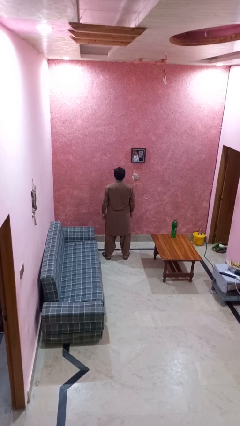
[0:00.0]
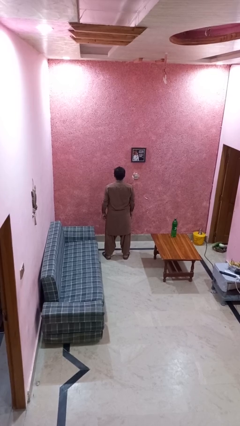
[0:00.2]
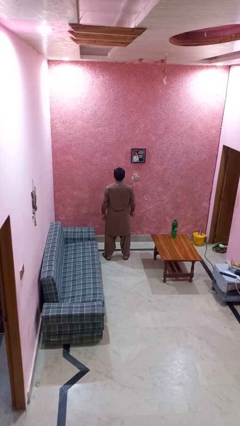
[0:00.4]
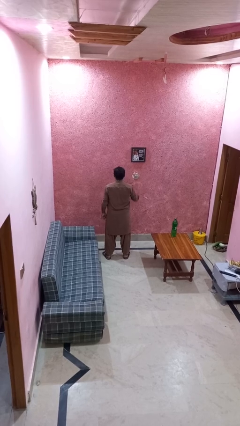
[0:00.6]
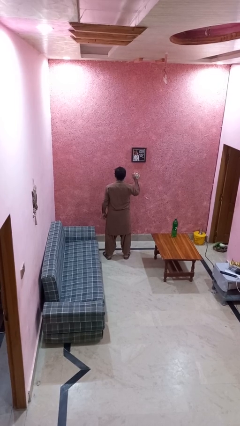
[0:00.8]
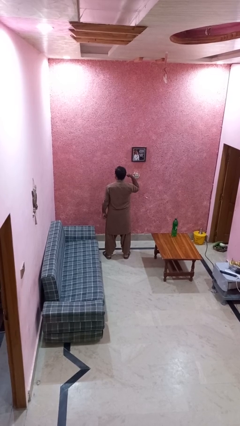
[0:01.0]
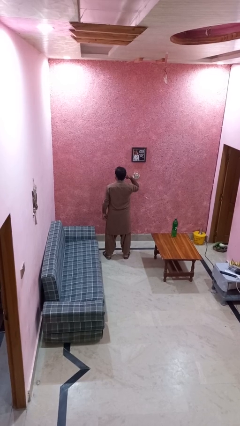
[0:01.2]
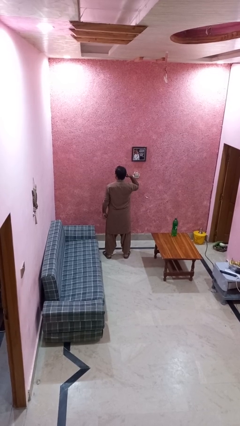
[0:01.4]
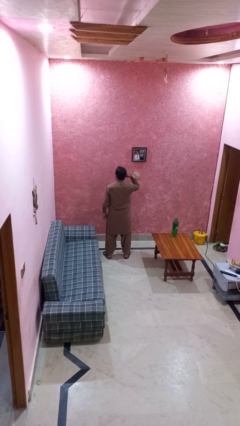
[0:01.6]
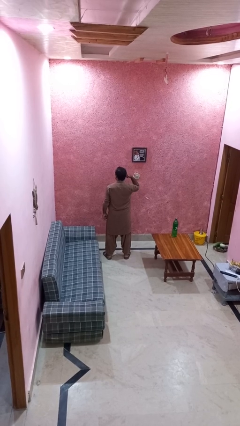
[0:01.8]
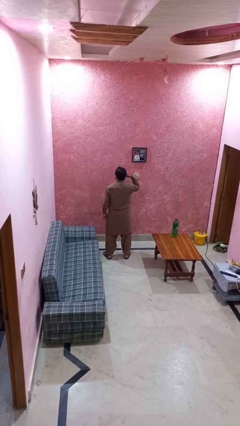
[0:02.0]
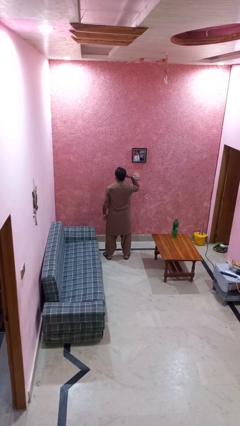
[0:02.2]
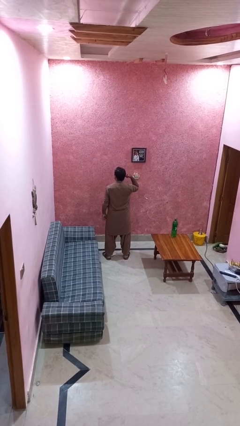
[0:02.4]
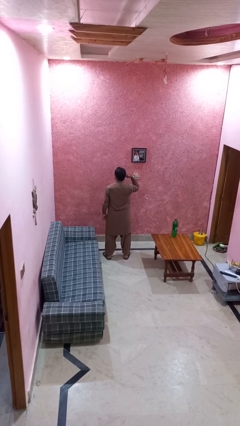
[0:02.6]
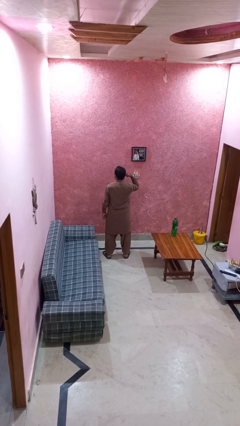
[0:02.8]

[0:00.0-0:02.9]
person gestures call me

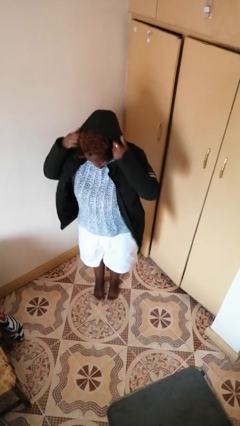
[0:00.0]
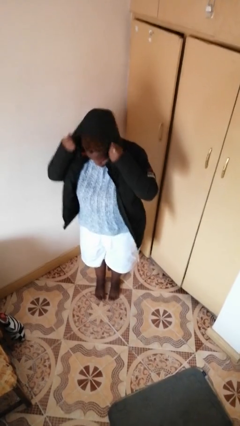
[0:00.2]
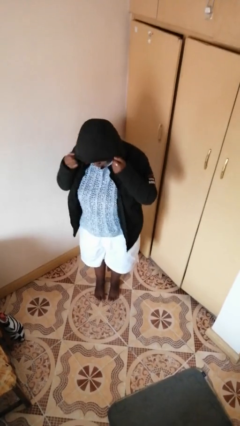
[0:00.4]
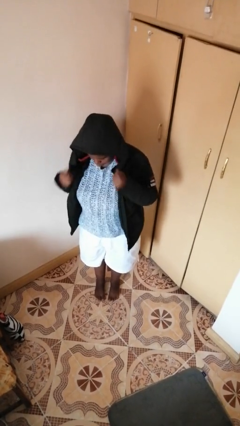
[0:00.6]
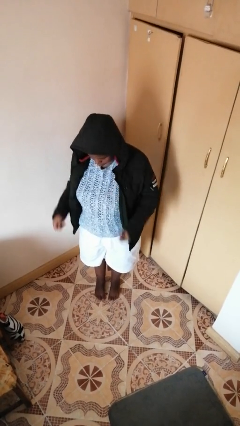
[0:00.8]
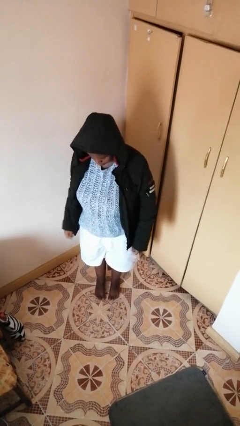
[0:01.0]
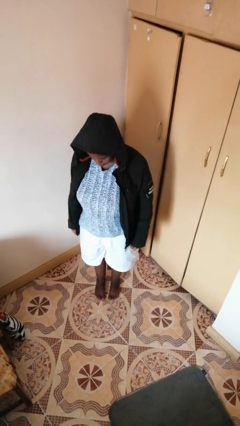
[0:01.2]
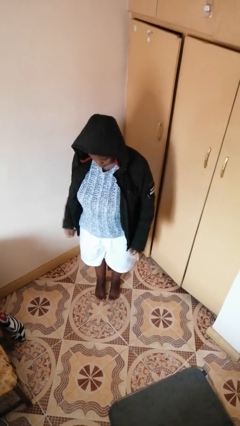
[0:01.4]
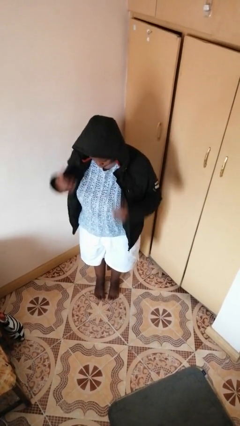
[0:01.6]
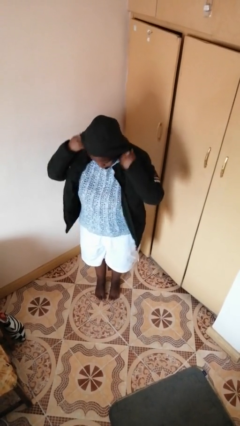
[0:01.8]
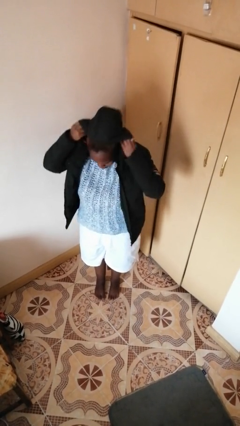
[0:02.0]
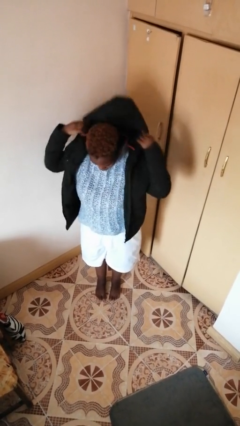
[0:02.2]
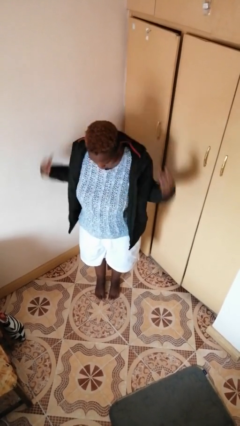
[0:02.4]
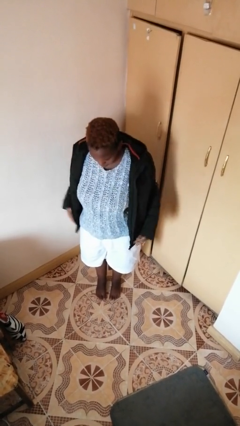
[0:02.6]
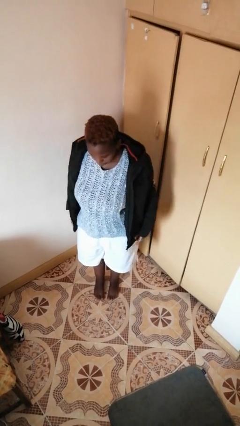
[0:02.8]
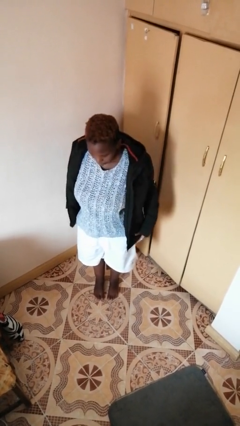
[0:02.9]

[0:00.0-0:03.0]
person takes off hoodie

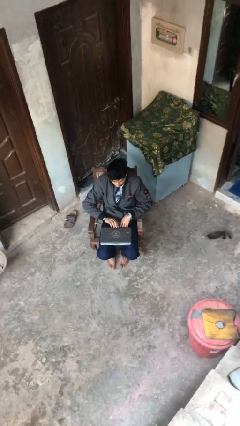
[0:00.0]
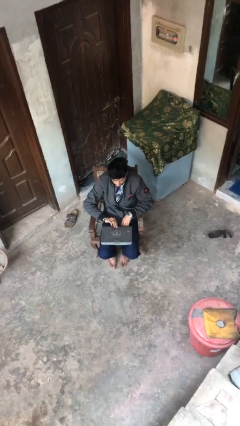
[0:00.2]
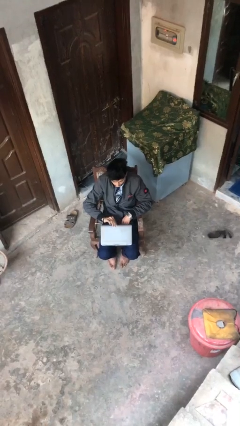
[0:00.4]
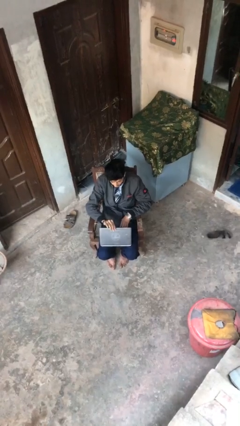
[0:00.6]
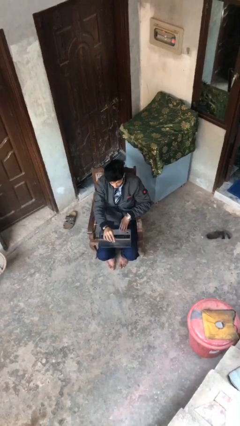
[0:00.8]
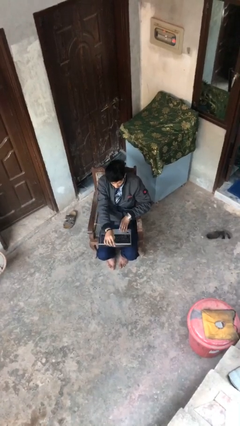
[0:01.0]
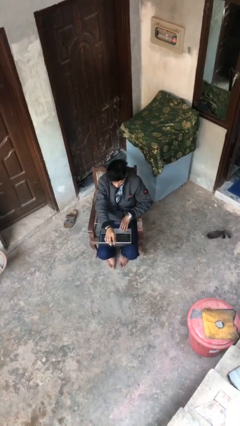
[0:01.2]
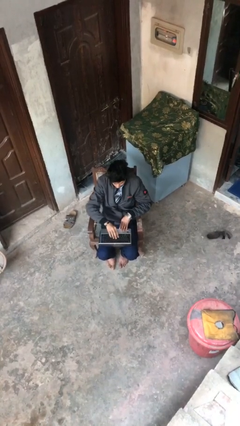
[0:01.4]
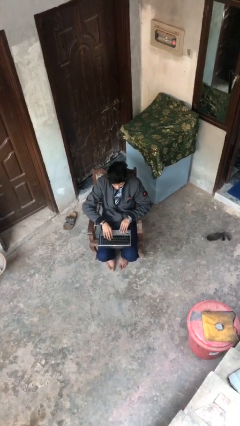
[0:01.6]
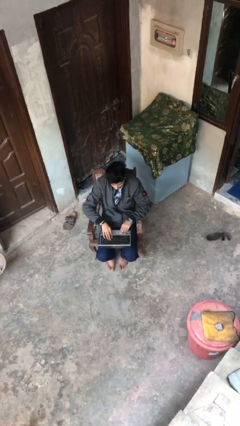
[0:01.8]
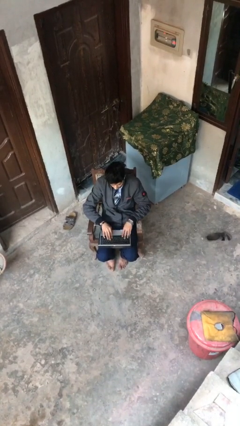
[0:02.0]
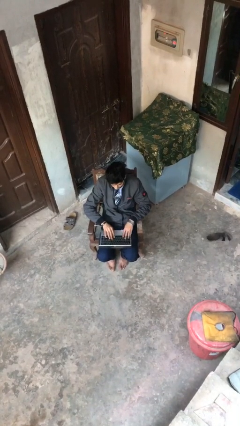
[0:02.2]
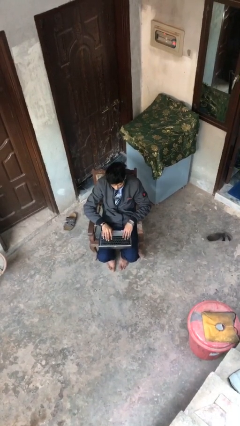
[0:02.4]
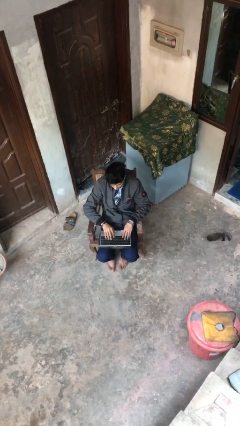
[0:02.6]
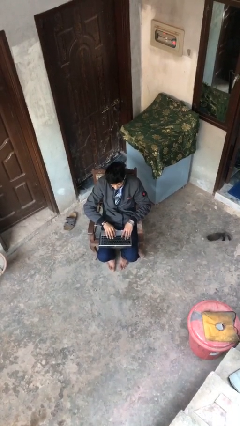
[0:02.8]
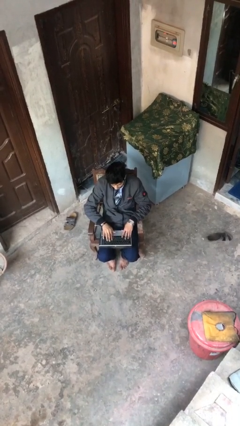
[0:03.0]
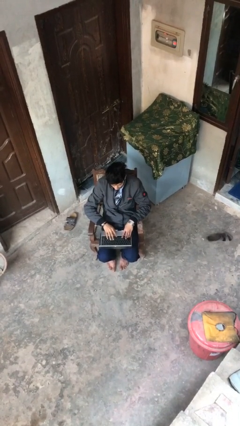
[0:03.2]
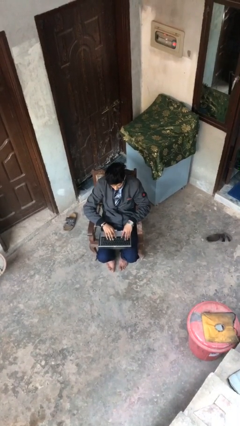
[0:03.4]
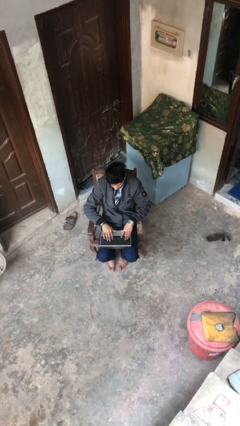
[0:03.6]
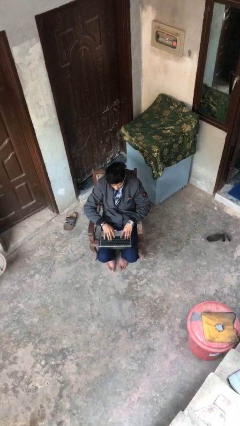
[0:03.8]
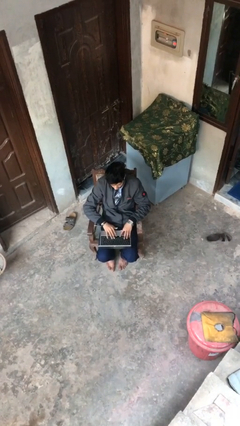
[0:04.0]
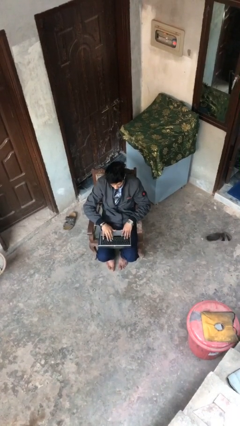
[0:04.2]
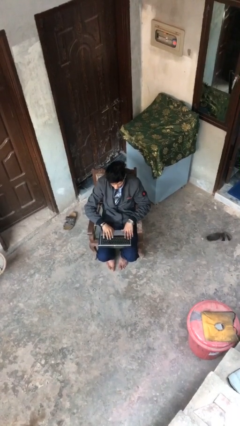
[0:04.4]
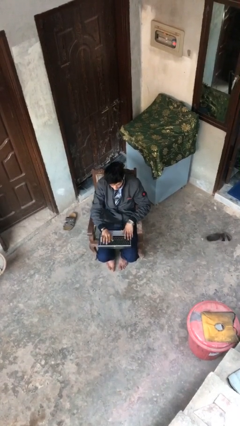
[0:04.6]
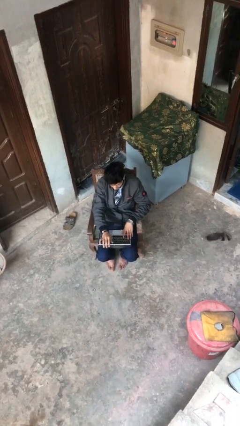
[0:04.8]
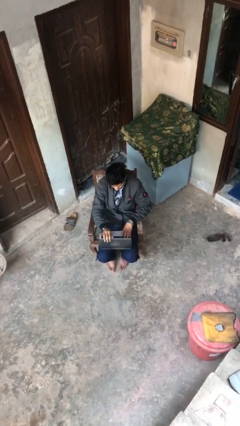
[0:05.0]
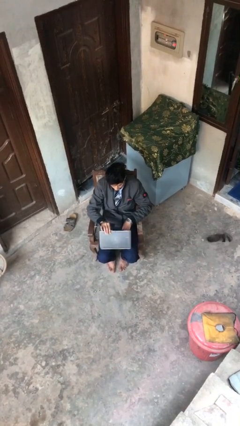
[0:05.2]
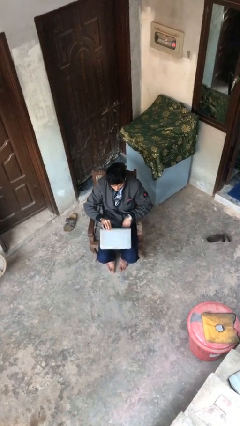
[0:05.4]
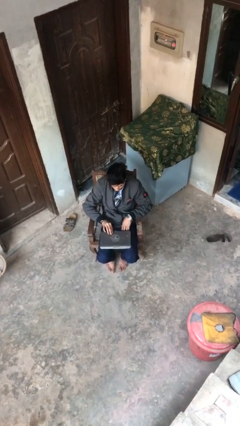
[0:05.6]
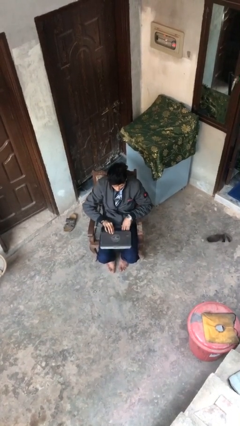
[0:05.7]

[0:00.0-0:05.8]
person interacts with laptop

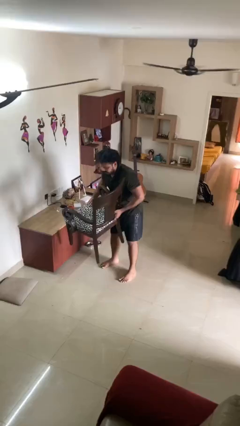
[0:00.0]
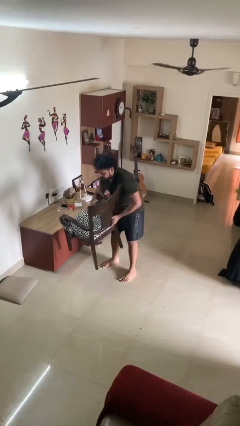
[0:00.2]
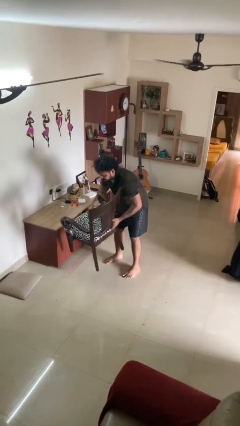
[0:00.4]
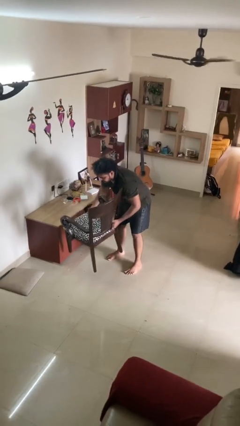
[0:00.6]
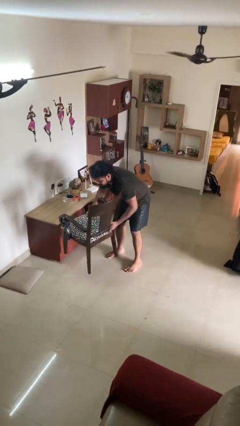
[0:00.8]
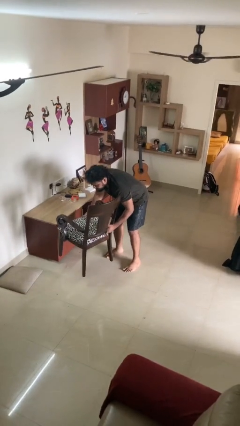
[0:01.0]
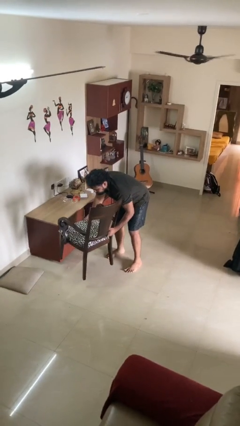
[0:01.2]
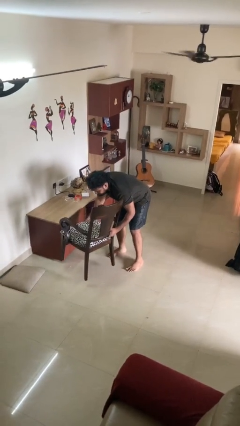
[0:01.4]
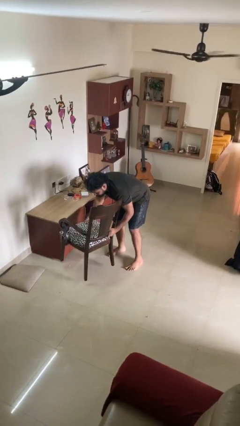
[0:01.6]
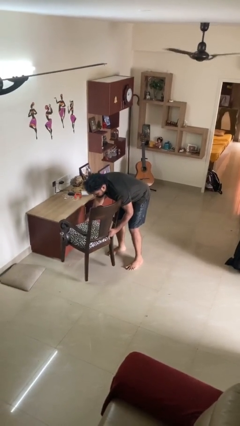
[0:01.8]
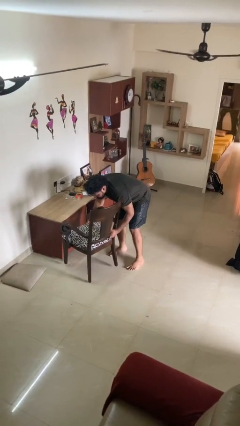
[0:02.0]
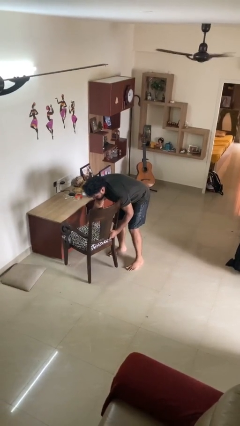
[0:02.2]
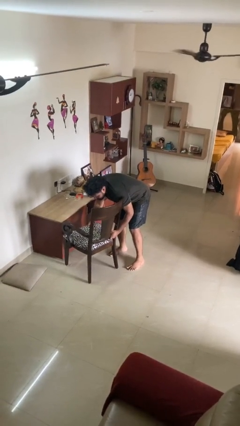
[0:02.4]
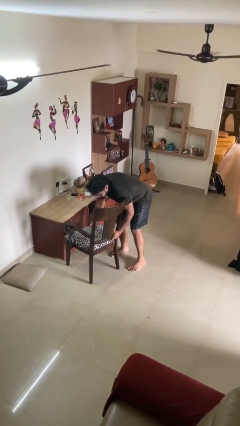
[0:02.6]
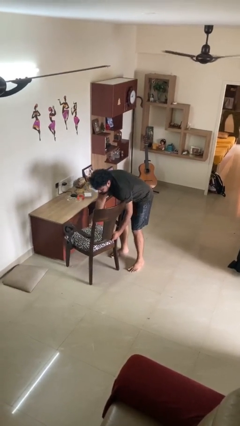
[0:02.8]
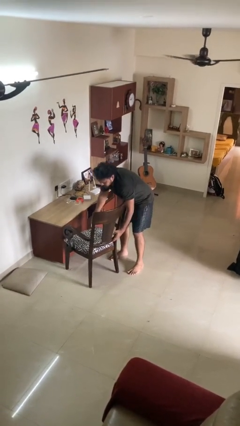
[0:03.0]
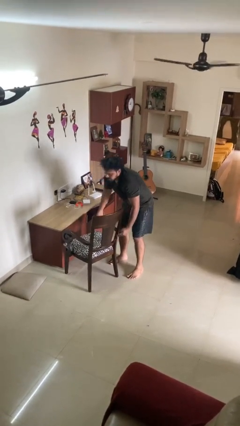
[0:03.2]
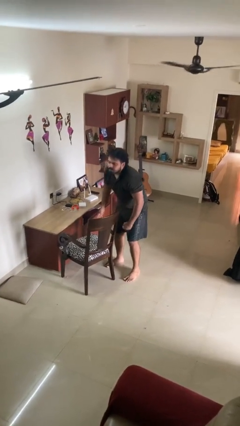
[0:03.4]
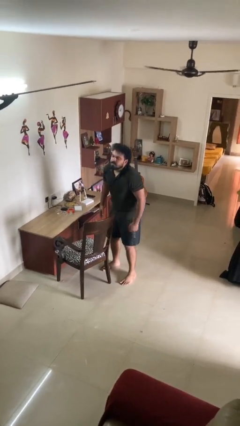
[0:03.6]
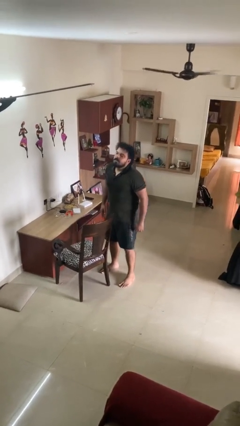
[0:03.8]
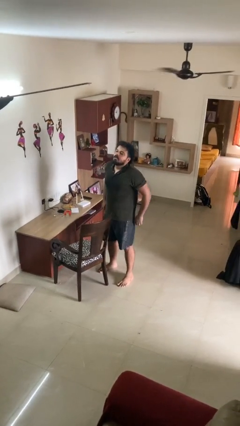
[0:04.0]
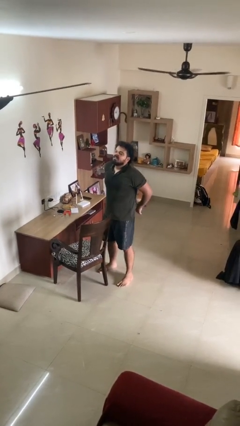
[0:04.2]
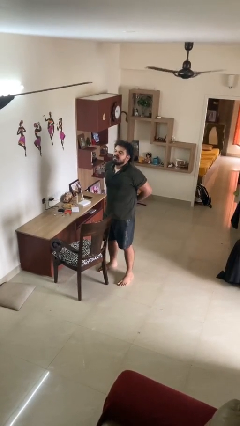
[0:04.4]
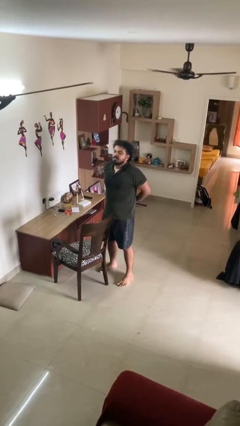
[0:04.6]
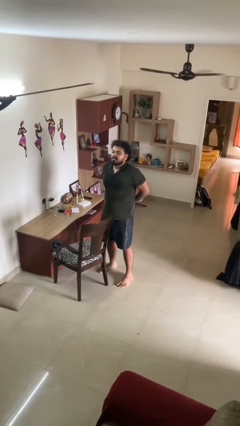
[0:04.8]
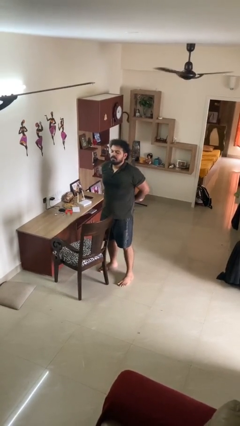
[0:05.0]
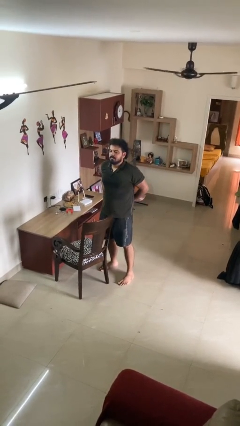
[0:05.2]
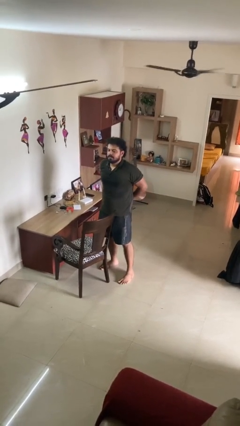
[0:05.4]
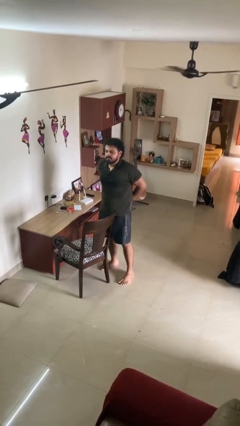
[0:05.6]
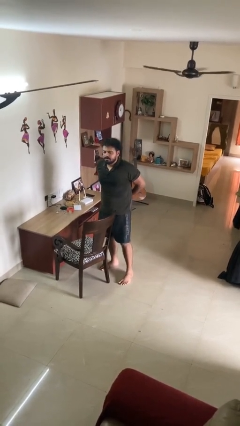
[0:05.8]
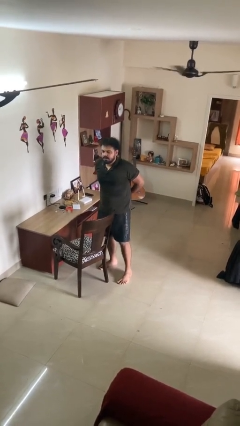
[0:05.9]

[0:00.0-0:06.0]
person puts down object on floor
